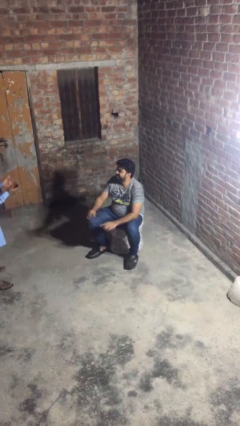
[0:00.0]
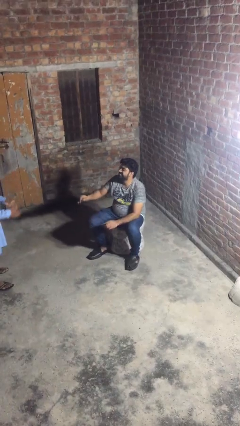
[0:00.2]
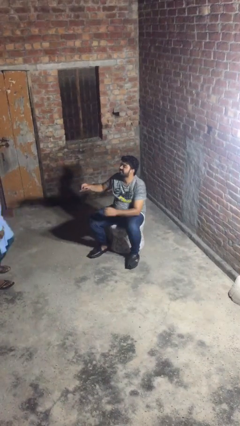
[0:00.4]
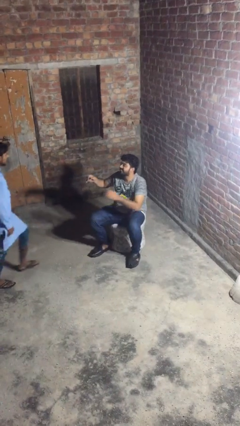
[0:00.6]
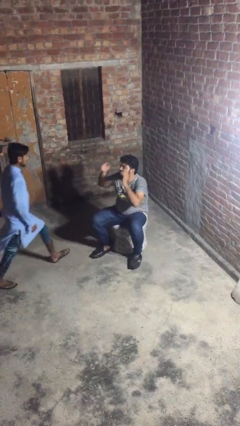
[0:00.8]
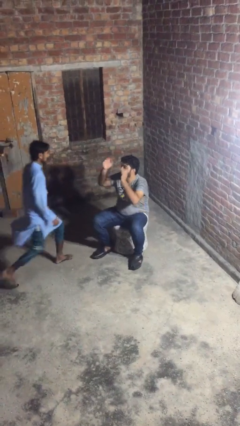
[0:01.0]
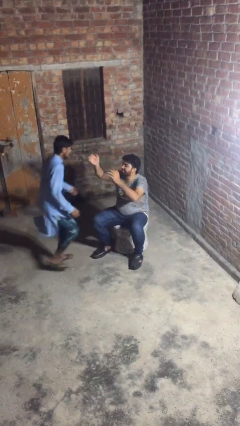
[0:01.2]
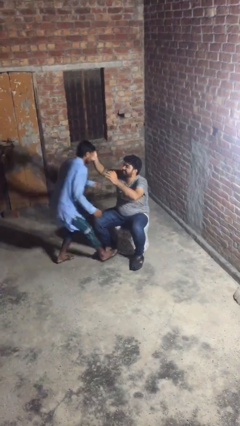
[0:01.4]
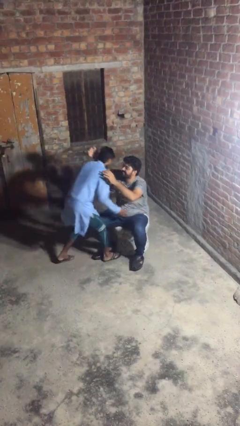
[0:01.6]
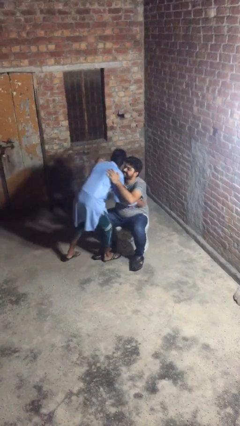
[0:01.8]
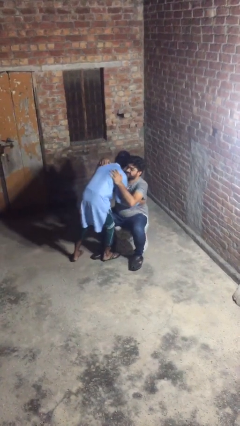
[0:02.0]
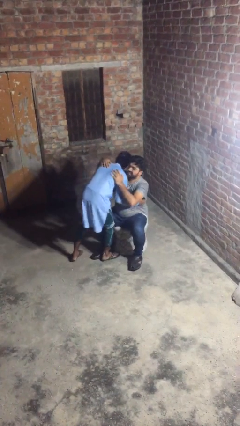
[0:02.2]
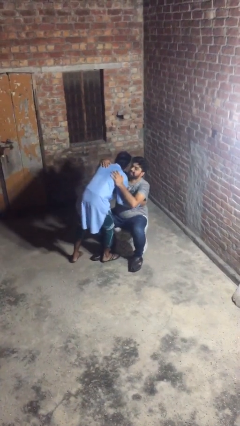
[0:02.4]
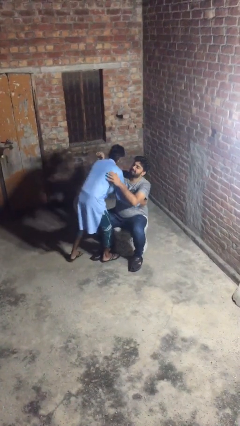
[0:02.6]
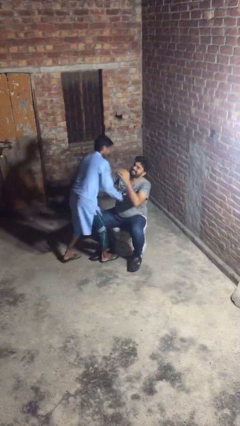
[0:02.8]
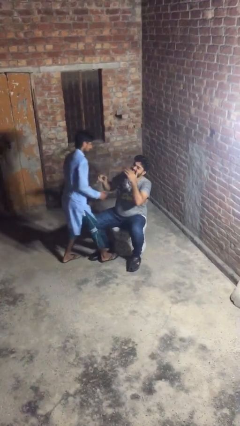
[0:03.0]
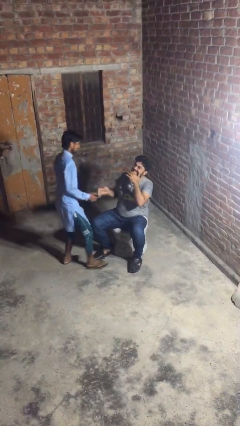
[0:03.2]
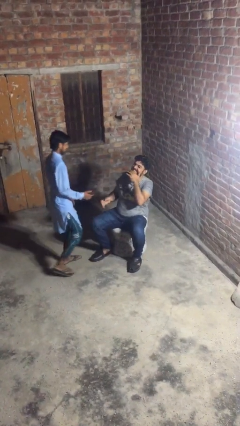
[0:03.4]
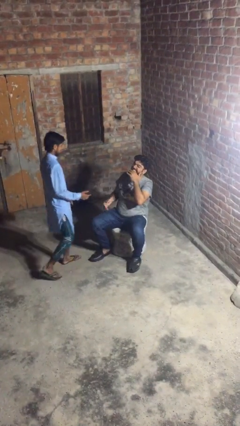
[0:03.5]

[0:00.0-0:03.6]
person embraces person

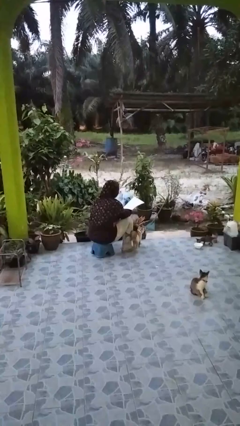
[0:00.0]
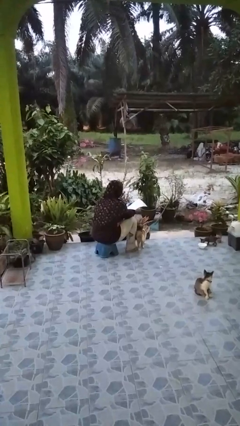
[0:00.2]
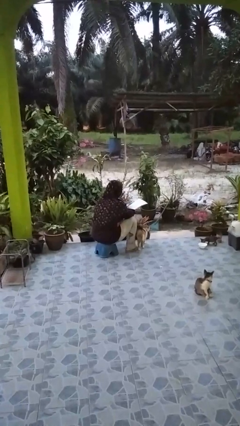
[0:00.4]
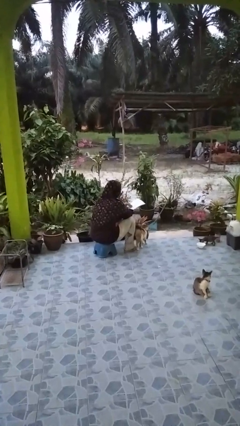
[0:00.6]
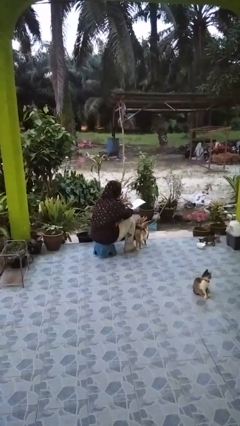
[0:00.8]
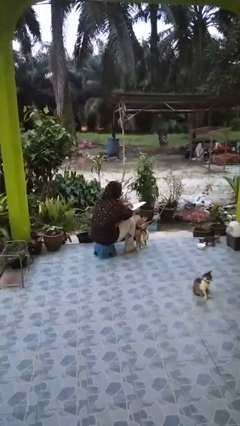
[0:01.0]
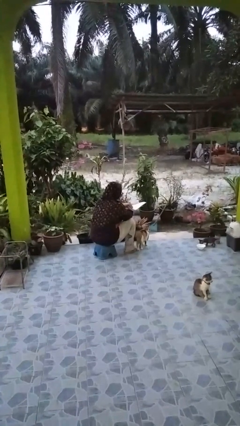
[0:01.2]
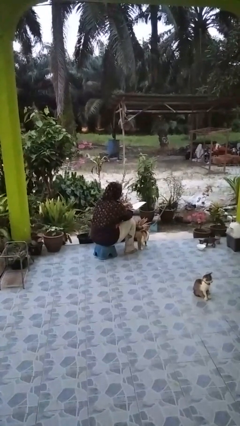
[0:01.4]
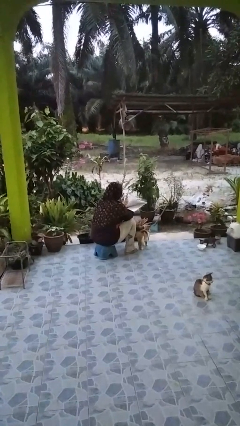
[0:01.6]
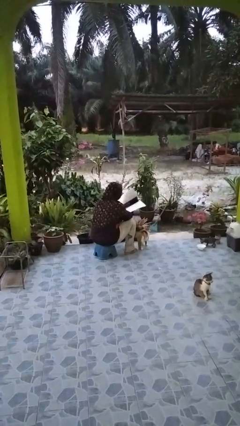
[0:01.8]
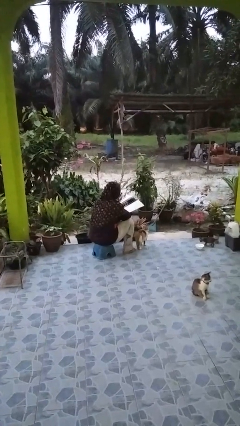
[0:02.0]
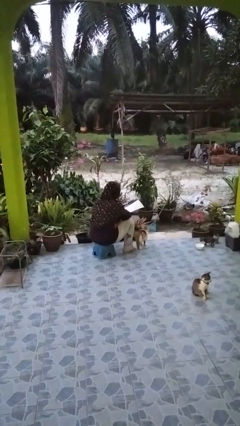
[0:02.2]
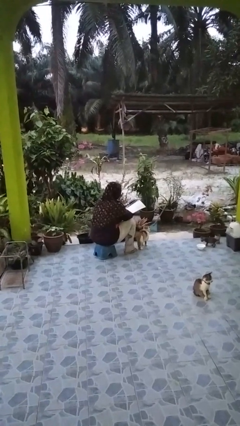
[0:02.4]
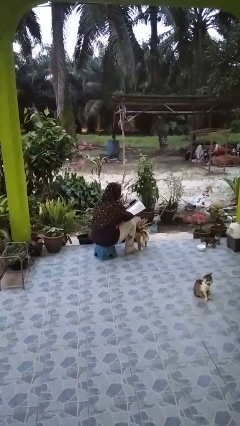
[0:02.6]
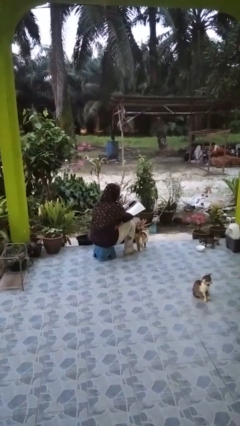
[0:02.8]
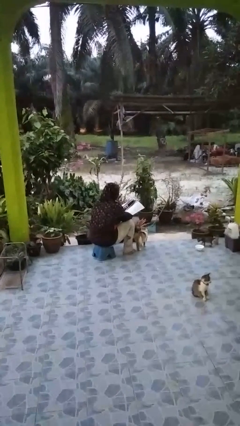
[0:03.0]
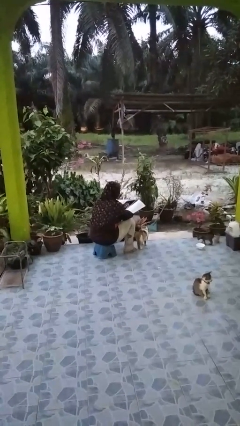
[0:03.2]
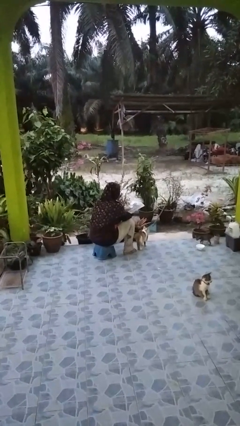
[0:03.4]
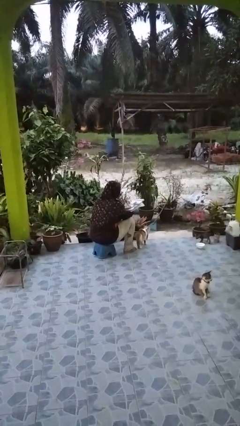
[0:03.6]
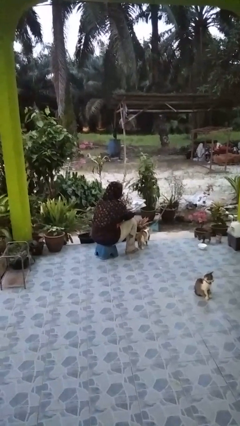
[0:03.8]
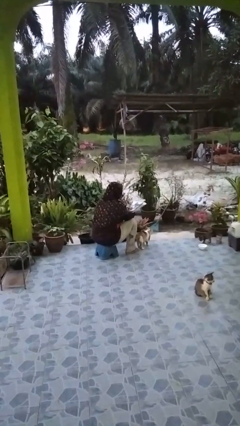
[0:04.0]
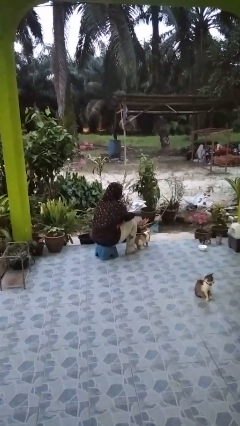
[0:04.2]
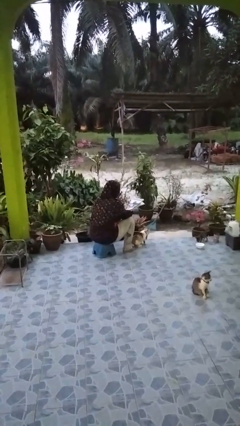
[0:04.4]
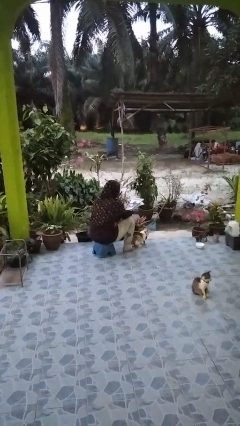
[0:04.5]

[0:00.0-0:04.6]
person reads magazine

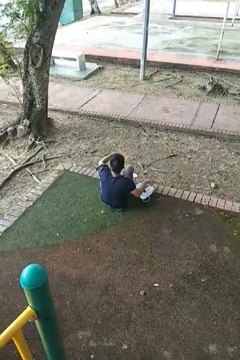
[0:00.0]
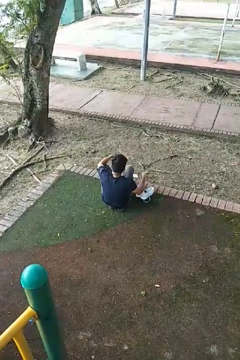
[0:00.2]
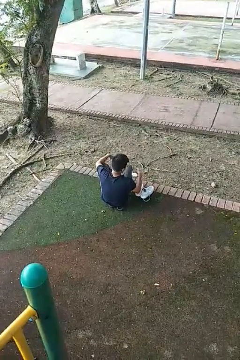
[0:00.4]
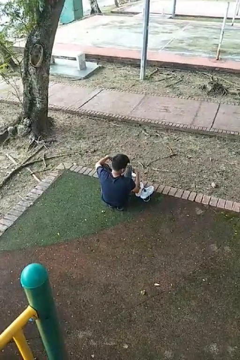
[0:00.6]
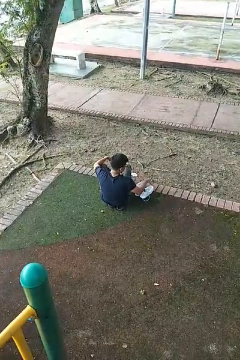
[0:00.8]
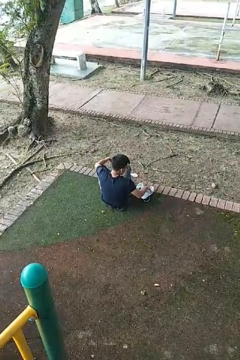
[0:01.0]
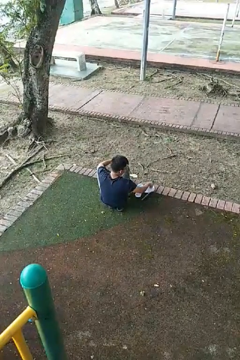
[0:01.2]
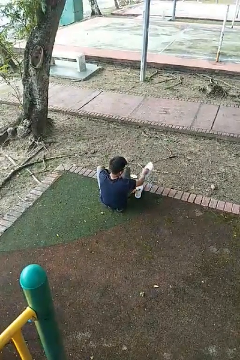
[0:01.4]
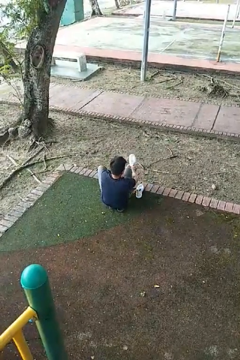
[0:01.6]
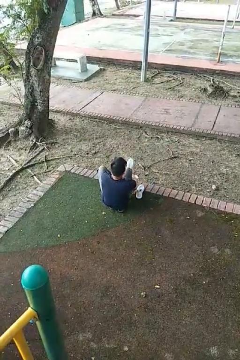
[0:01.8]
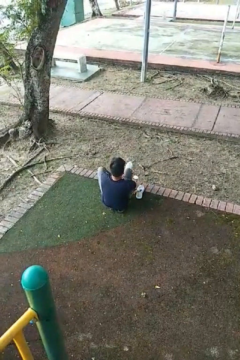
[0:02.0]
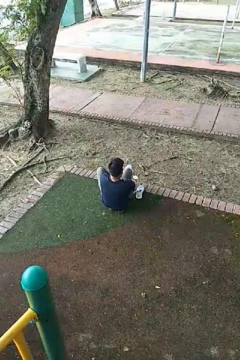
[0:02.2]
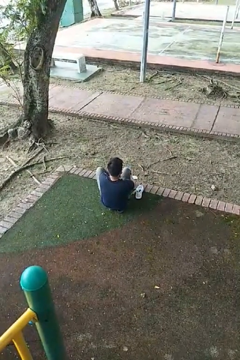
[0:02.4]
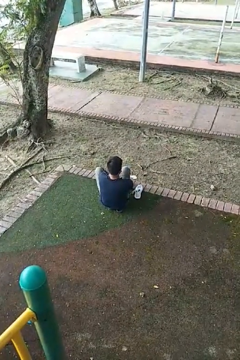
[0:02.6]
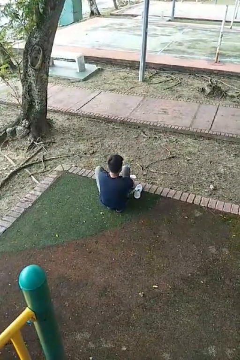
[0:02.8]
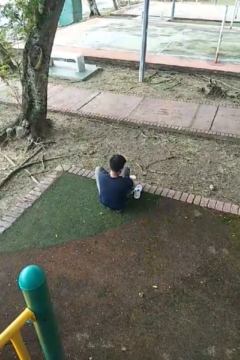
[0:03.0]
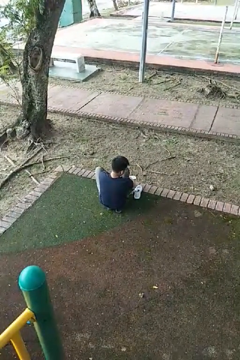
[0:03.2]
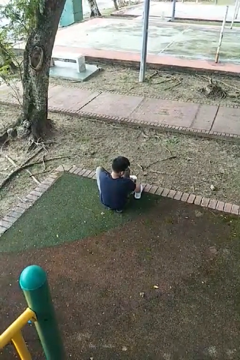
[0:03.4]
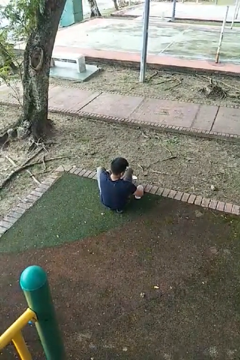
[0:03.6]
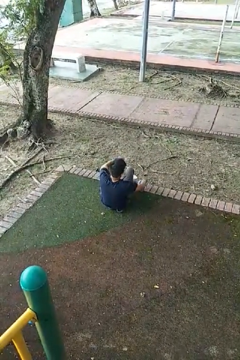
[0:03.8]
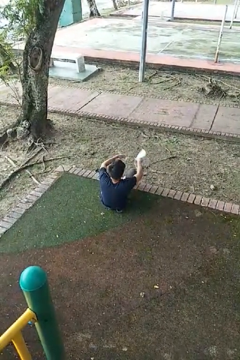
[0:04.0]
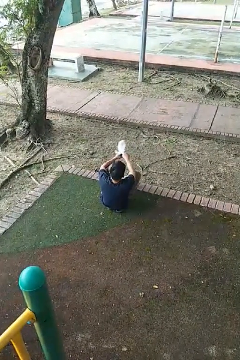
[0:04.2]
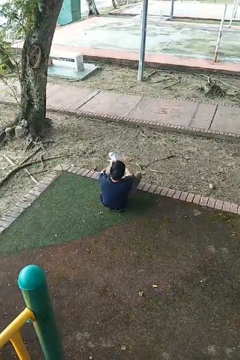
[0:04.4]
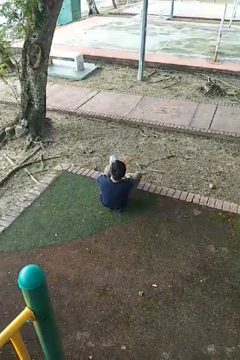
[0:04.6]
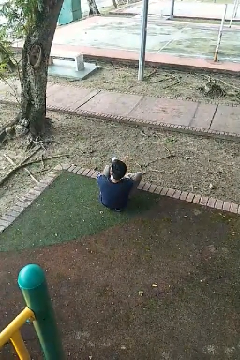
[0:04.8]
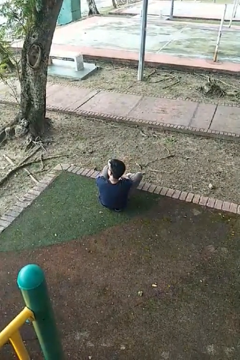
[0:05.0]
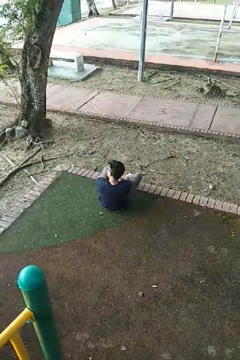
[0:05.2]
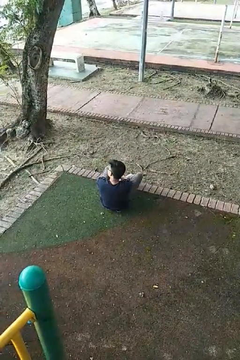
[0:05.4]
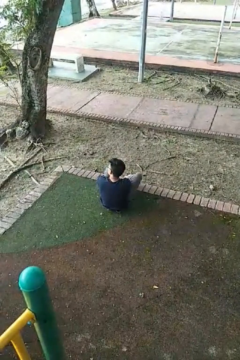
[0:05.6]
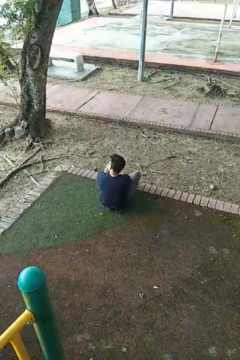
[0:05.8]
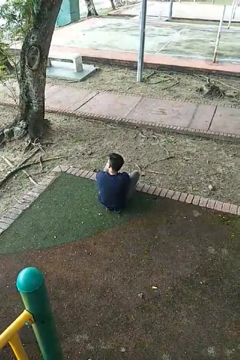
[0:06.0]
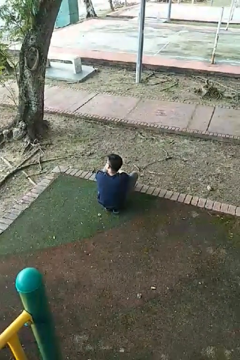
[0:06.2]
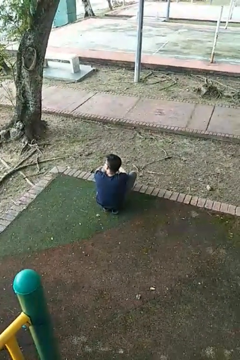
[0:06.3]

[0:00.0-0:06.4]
person puts on shoes

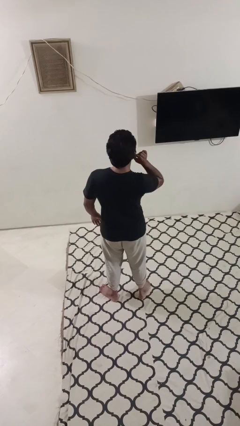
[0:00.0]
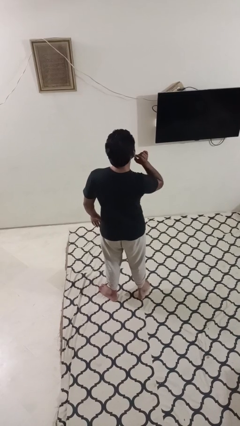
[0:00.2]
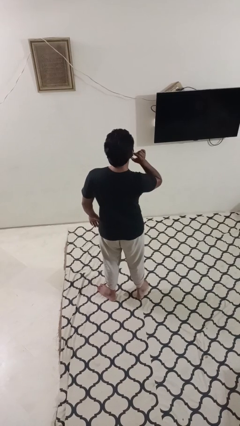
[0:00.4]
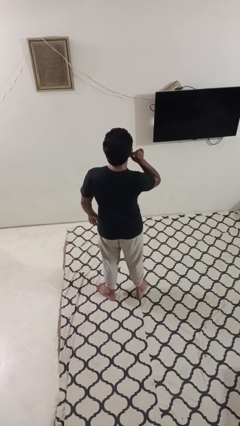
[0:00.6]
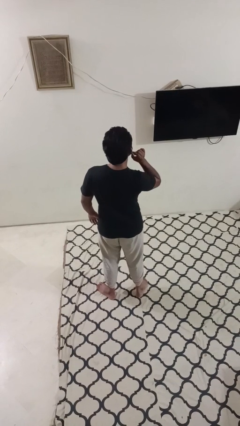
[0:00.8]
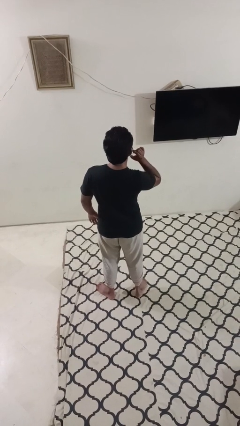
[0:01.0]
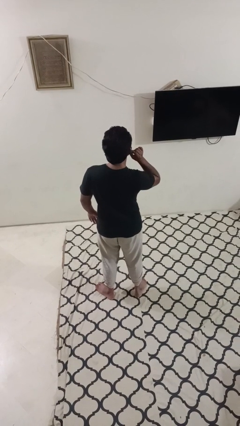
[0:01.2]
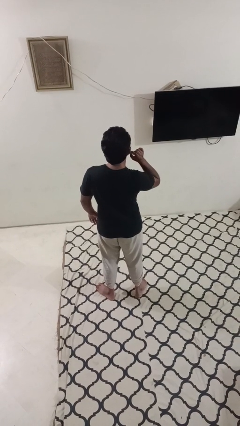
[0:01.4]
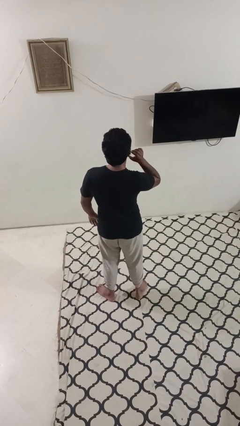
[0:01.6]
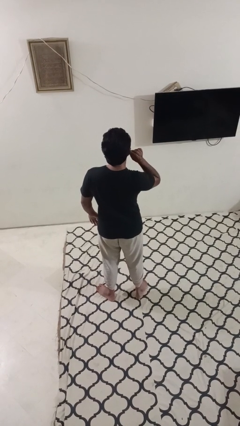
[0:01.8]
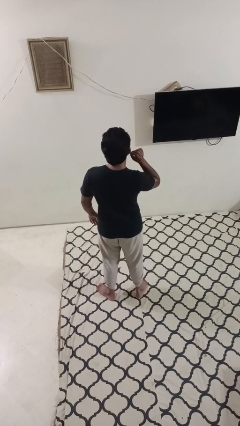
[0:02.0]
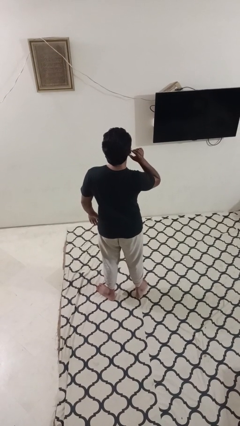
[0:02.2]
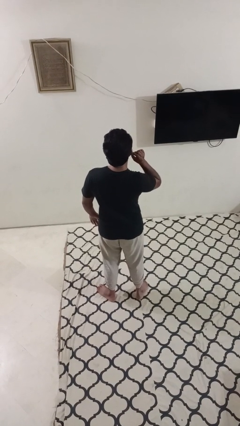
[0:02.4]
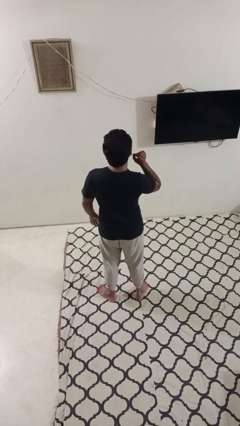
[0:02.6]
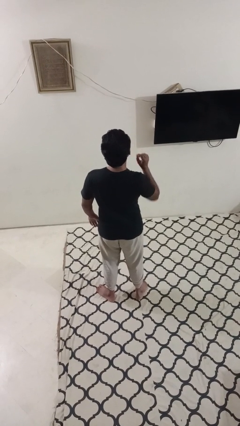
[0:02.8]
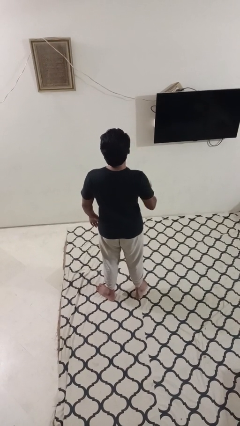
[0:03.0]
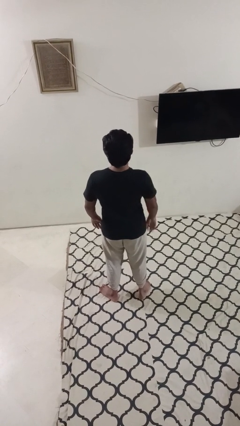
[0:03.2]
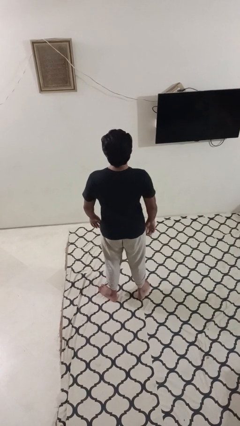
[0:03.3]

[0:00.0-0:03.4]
person touches earlobe

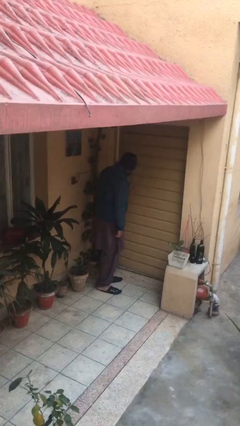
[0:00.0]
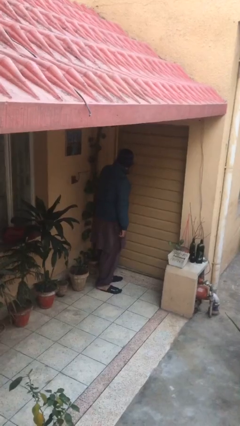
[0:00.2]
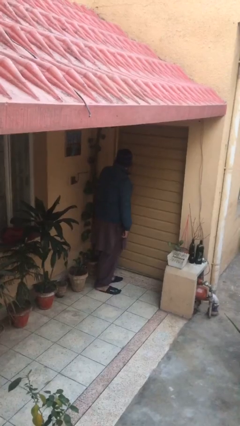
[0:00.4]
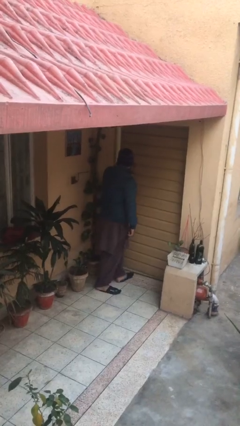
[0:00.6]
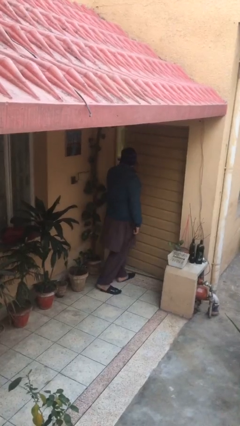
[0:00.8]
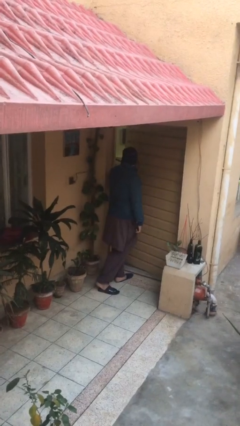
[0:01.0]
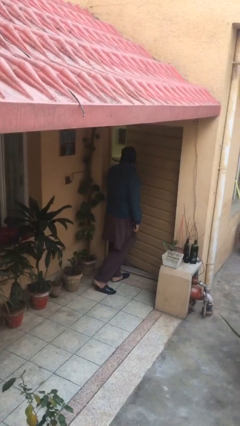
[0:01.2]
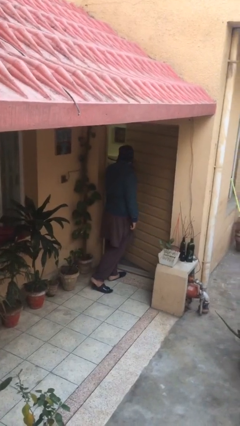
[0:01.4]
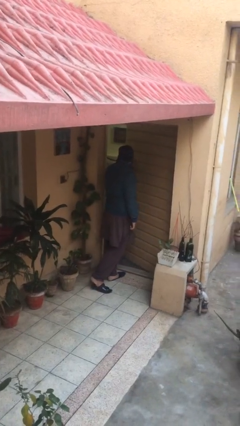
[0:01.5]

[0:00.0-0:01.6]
person opens facility door
